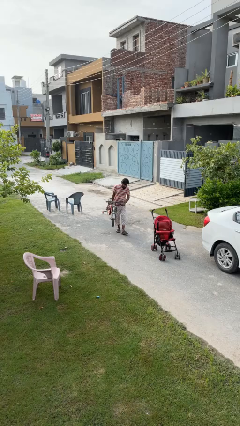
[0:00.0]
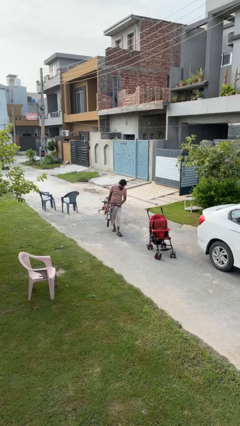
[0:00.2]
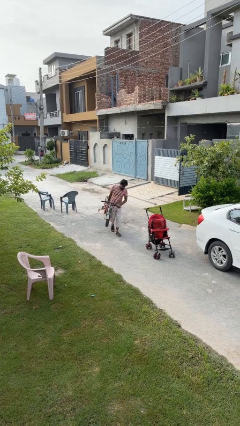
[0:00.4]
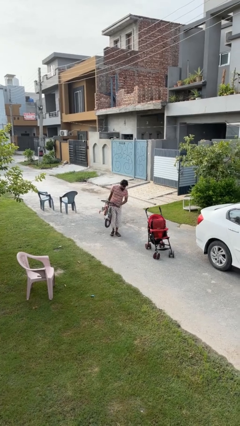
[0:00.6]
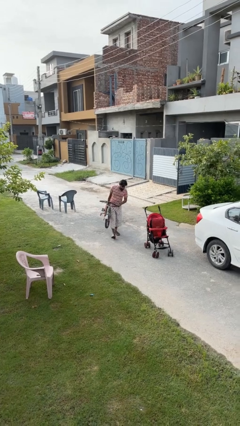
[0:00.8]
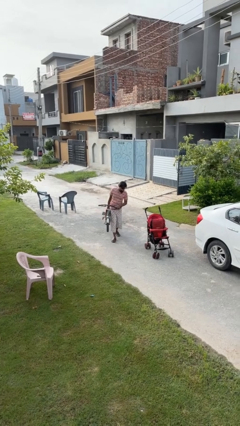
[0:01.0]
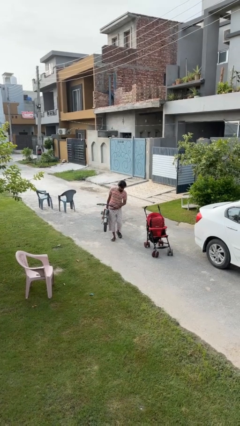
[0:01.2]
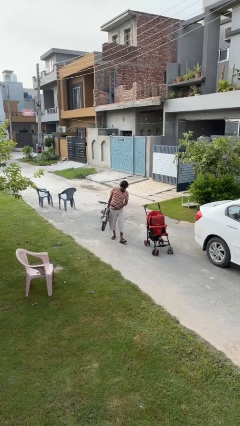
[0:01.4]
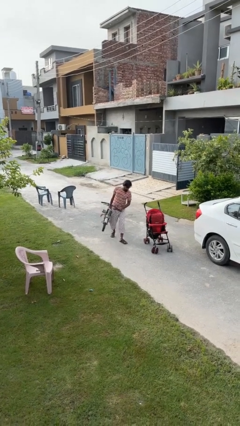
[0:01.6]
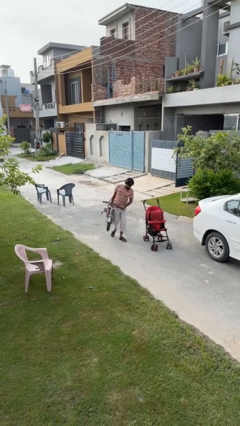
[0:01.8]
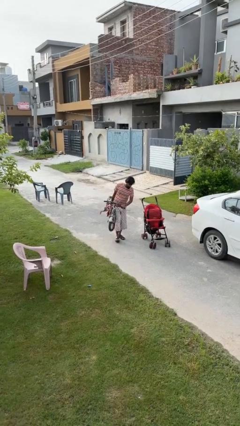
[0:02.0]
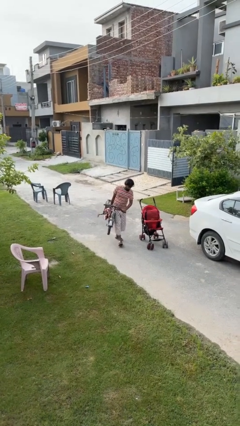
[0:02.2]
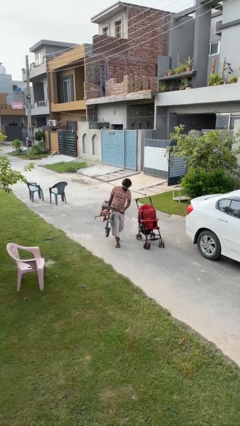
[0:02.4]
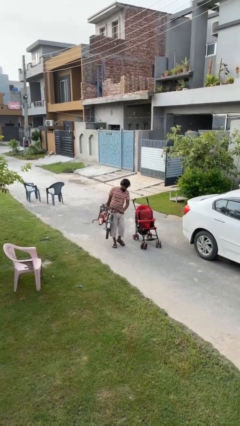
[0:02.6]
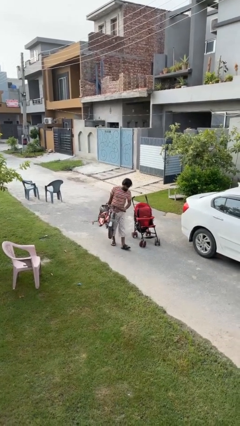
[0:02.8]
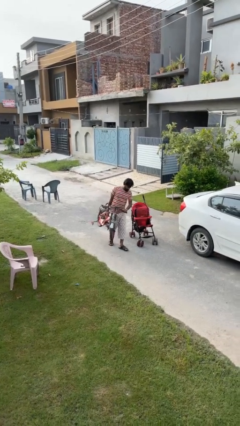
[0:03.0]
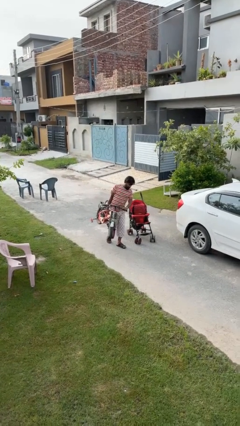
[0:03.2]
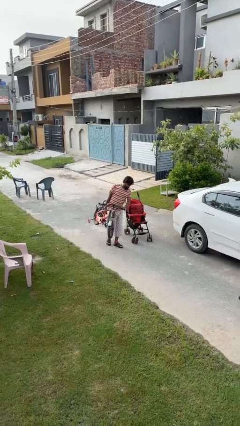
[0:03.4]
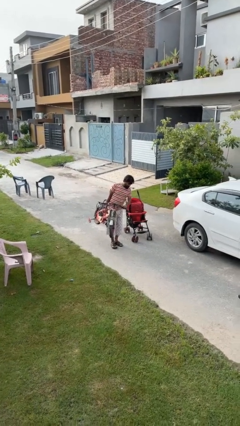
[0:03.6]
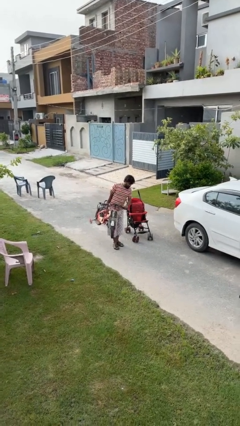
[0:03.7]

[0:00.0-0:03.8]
person carries bicycle

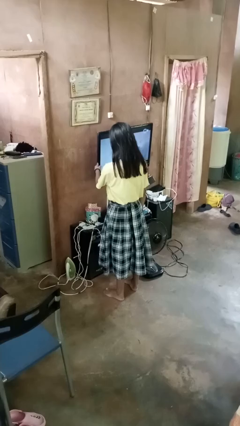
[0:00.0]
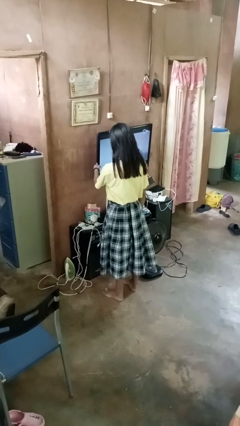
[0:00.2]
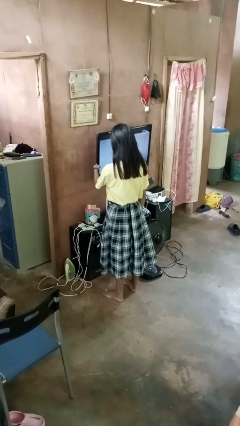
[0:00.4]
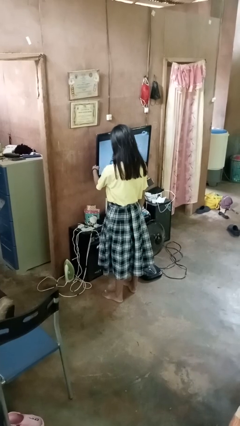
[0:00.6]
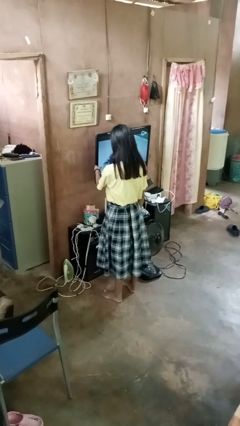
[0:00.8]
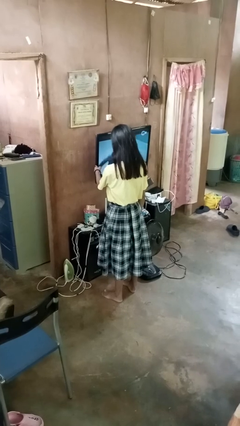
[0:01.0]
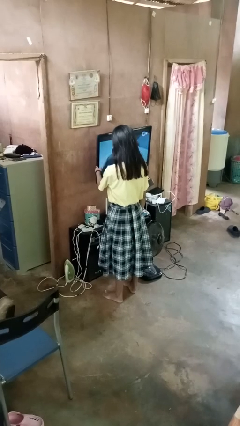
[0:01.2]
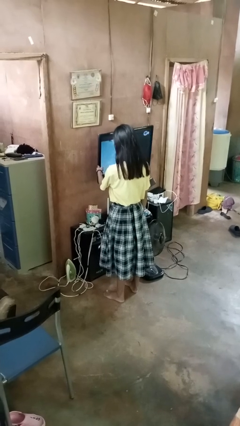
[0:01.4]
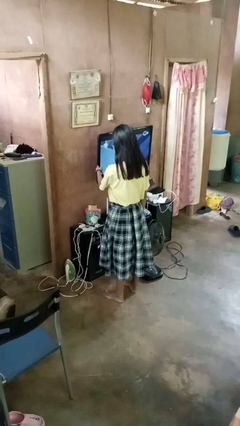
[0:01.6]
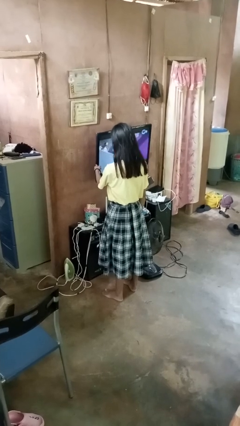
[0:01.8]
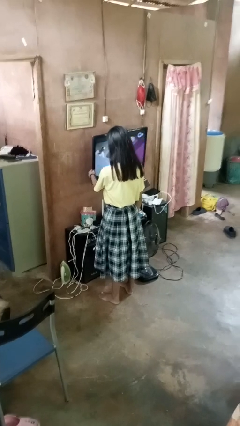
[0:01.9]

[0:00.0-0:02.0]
person taps object with finger

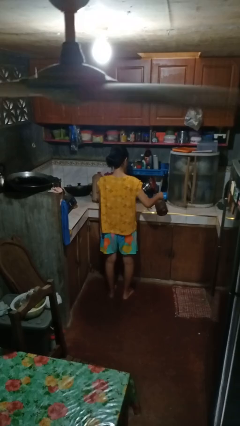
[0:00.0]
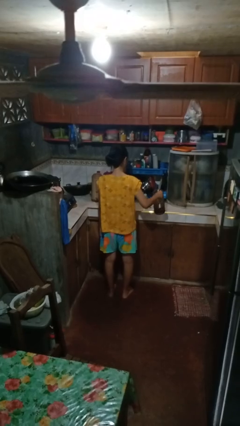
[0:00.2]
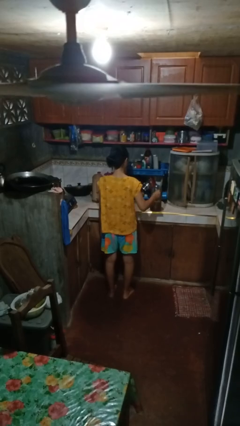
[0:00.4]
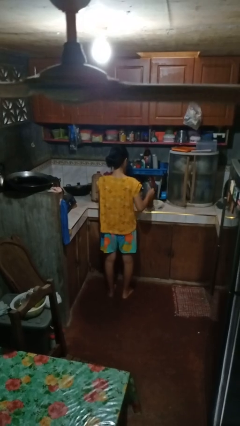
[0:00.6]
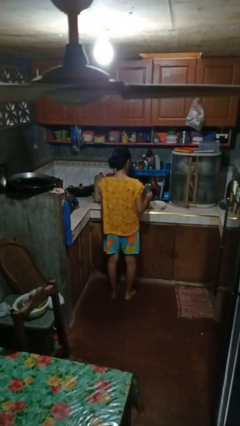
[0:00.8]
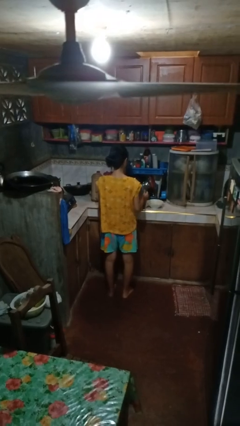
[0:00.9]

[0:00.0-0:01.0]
person pours into bowl

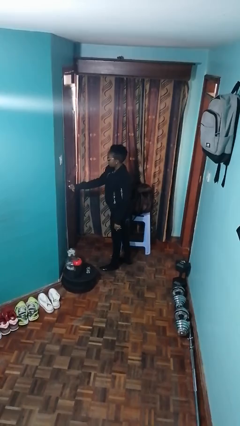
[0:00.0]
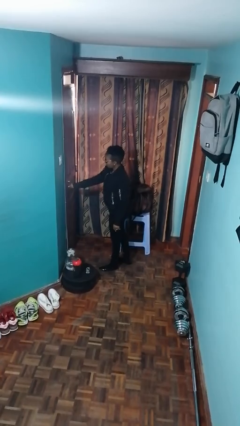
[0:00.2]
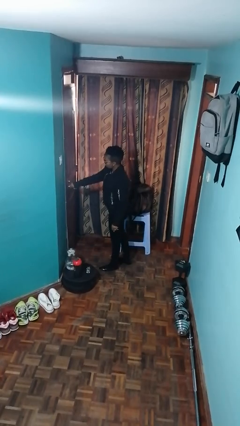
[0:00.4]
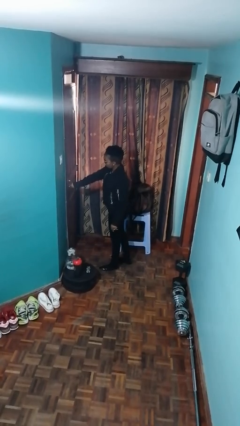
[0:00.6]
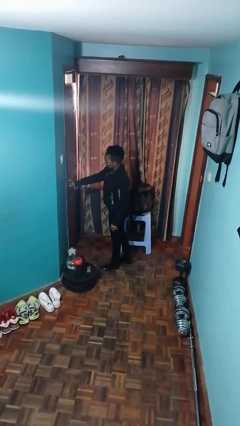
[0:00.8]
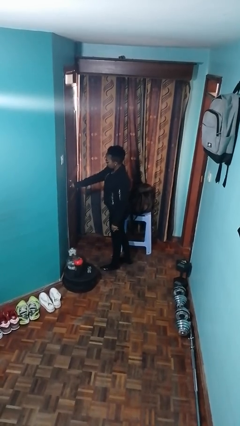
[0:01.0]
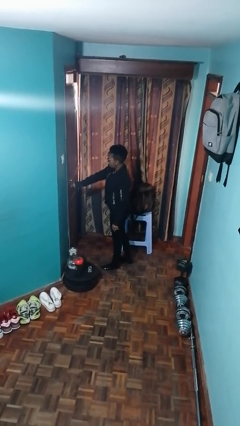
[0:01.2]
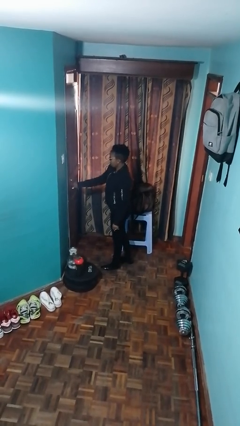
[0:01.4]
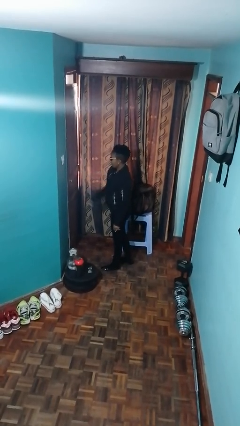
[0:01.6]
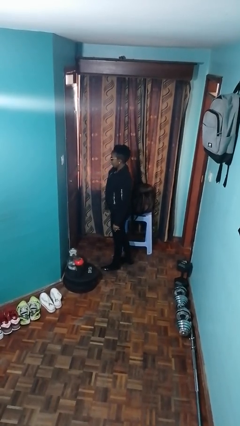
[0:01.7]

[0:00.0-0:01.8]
person locks door with keys

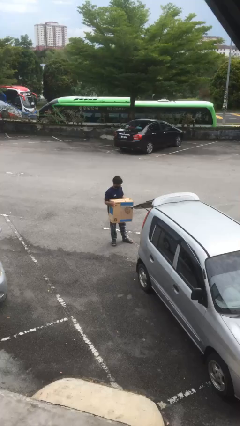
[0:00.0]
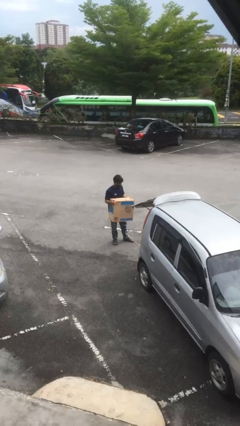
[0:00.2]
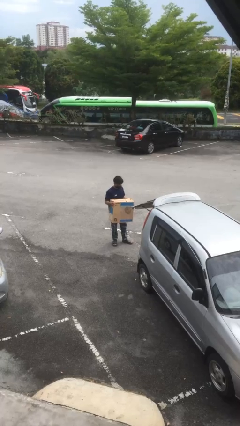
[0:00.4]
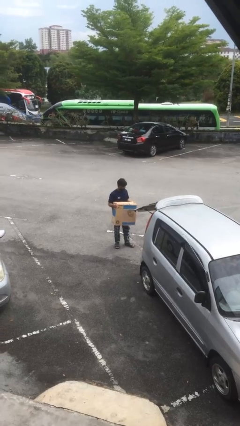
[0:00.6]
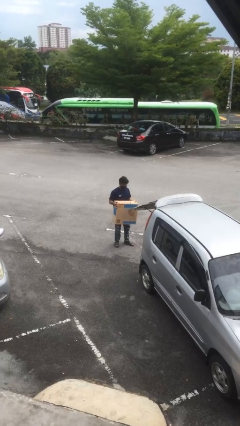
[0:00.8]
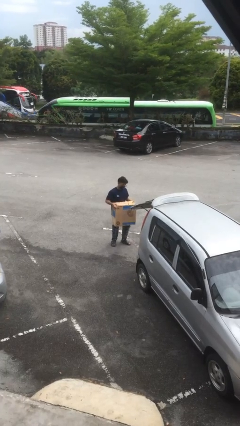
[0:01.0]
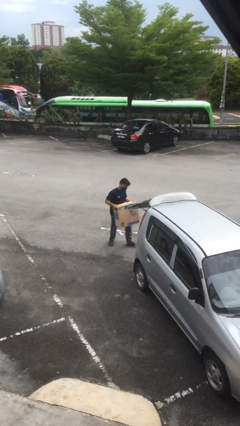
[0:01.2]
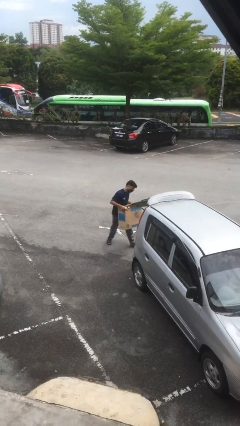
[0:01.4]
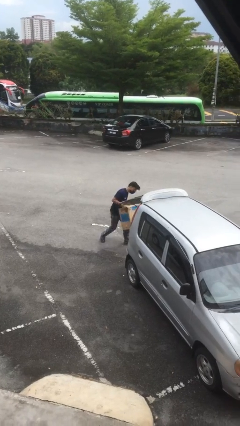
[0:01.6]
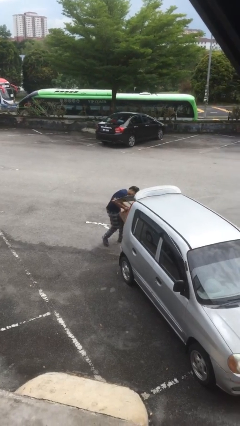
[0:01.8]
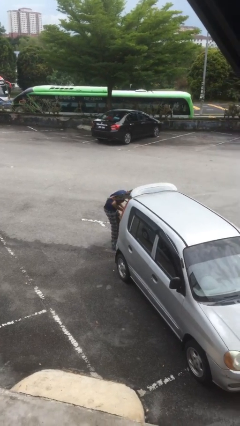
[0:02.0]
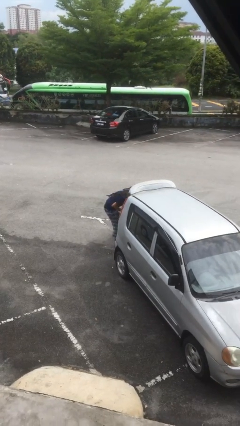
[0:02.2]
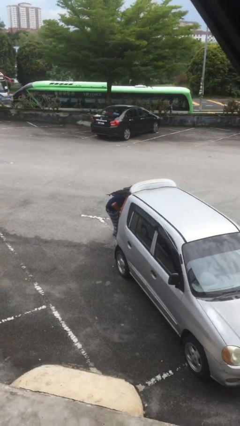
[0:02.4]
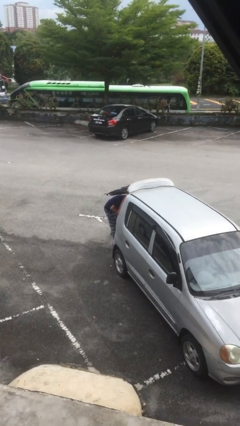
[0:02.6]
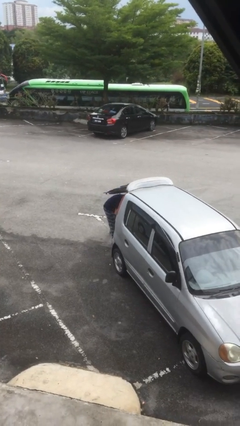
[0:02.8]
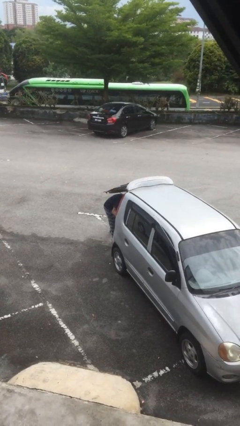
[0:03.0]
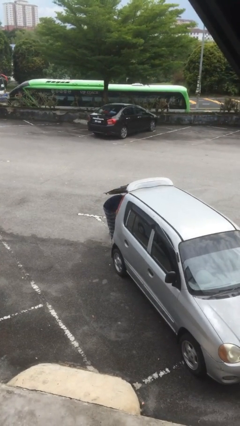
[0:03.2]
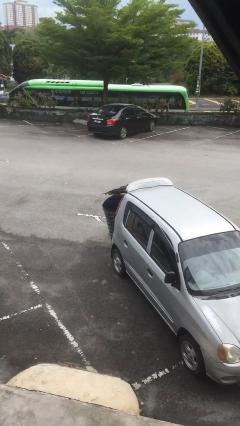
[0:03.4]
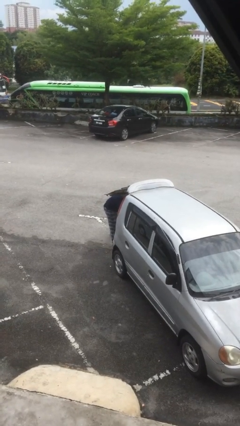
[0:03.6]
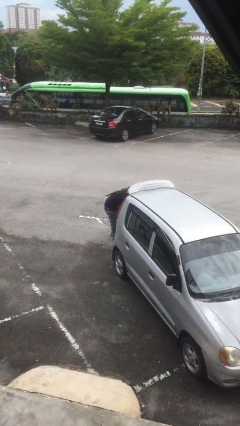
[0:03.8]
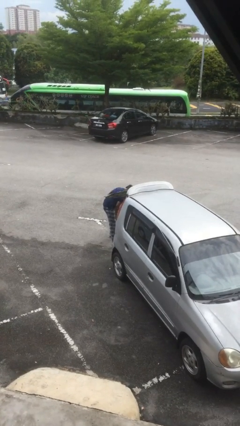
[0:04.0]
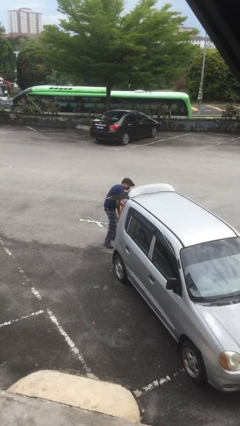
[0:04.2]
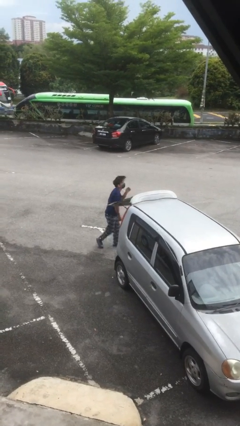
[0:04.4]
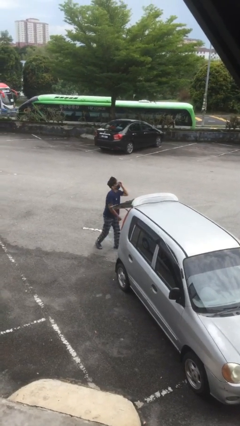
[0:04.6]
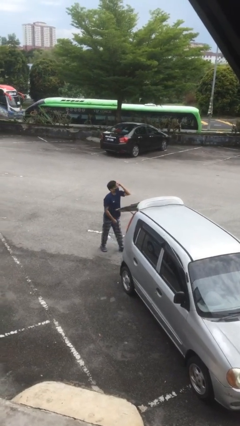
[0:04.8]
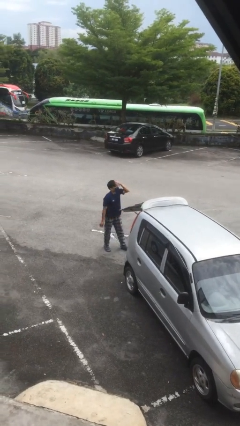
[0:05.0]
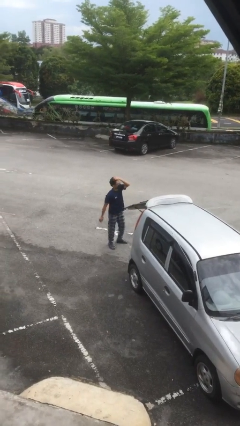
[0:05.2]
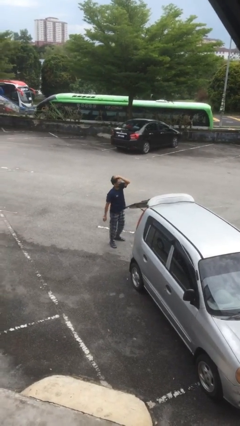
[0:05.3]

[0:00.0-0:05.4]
person loads car

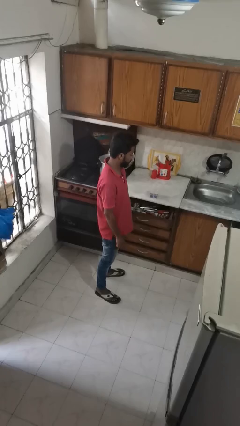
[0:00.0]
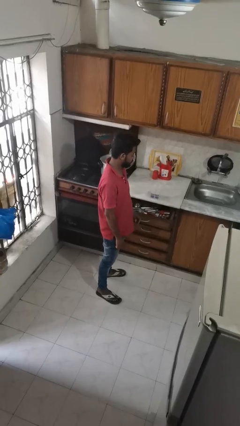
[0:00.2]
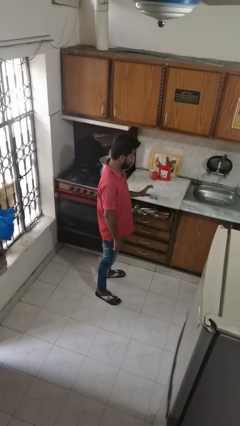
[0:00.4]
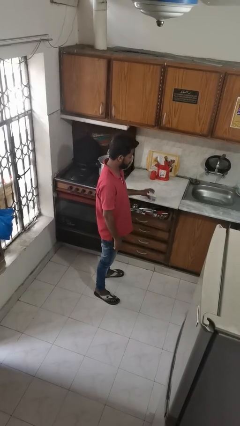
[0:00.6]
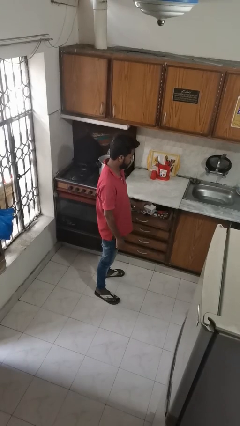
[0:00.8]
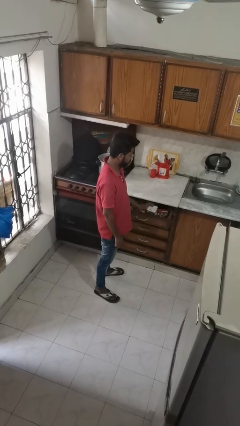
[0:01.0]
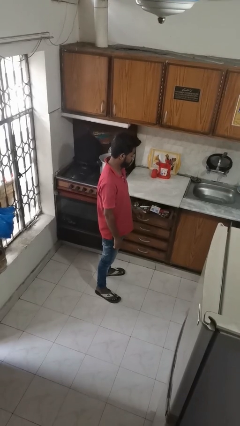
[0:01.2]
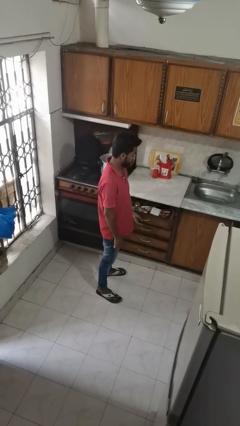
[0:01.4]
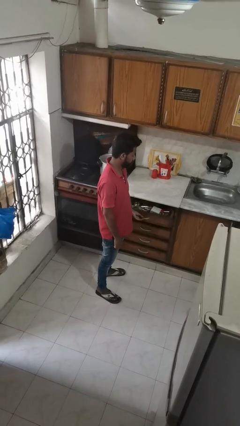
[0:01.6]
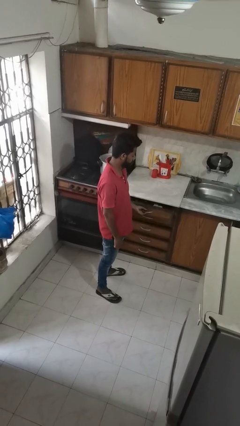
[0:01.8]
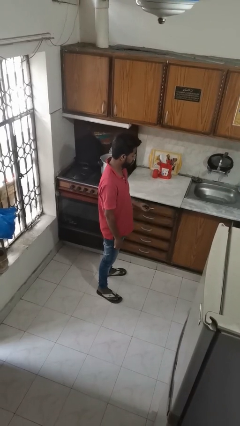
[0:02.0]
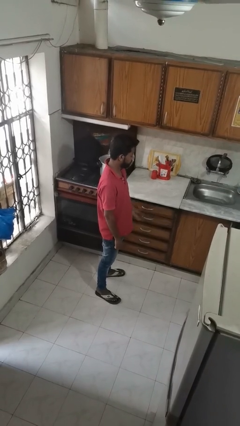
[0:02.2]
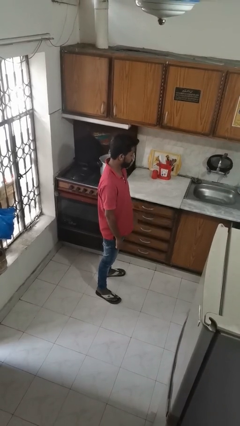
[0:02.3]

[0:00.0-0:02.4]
person puts object into kitchen drawer

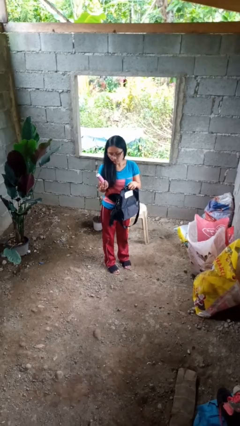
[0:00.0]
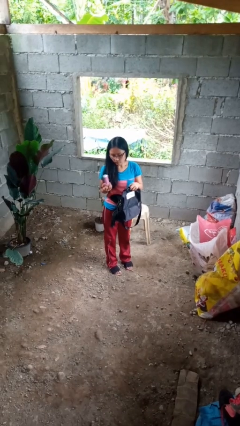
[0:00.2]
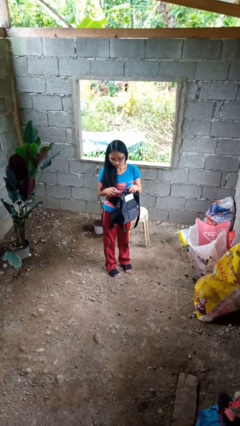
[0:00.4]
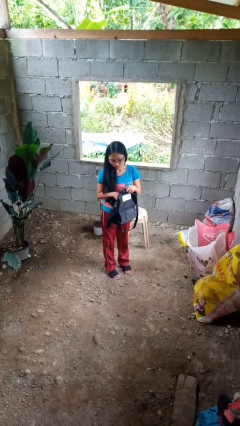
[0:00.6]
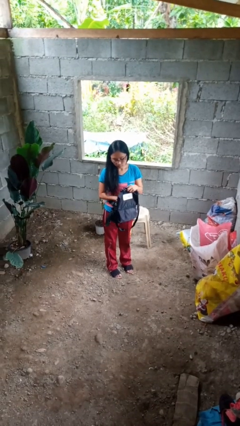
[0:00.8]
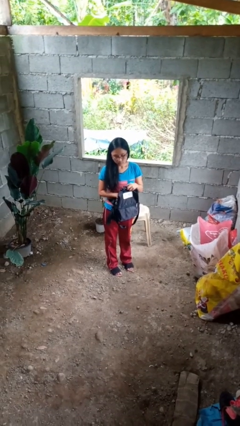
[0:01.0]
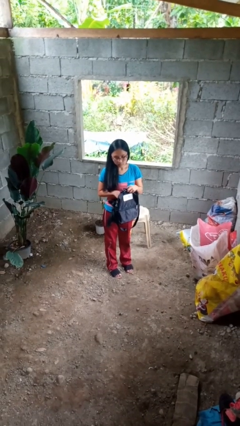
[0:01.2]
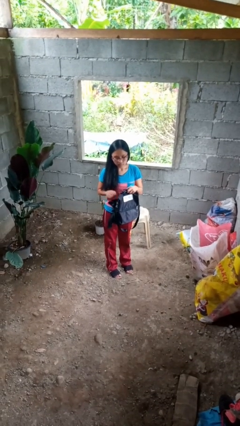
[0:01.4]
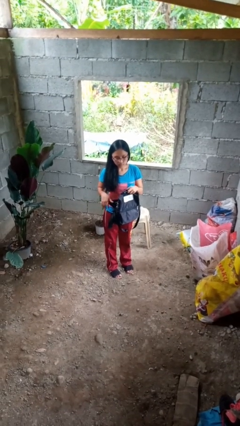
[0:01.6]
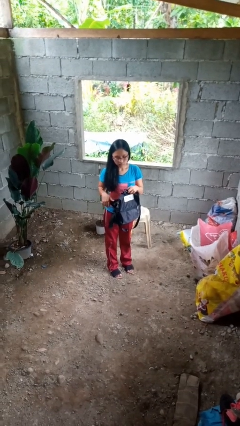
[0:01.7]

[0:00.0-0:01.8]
person puts object into backpack
